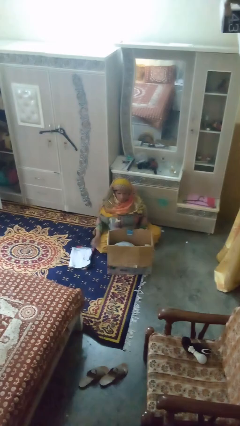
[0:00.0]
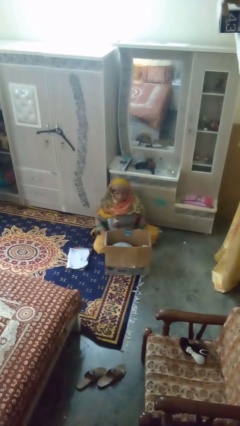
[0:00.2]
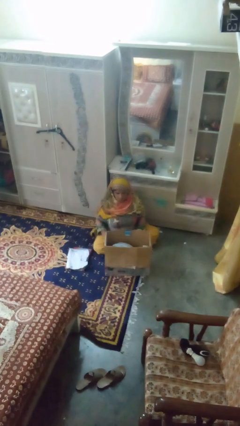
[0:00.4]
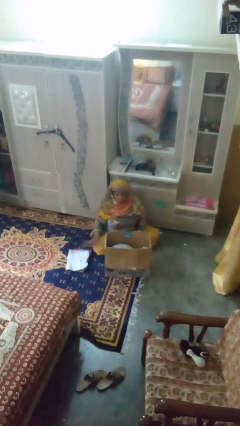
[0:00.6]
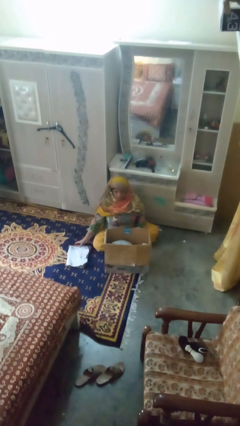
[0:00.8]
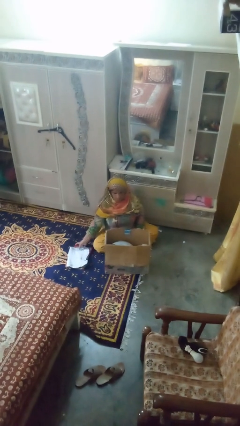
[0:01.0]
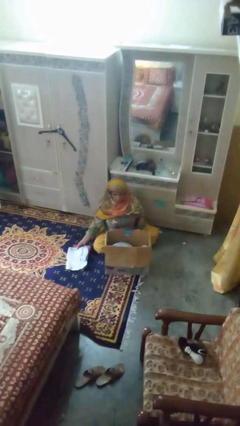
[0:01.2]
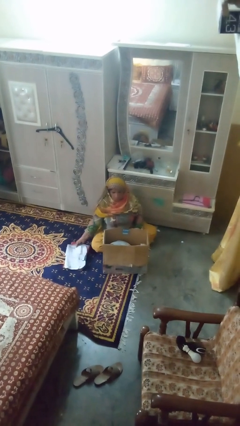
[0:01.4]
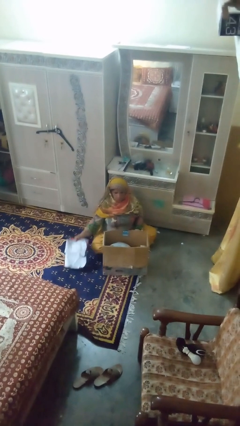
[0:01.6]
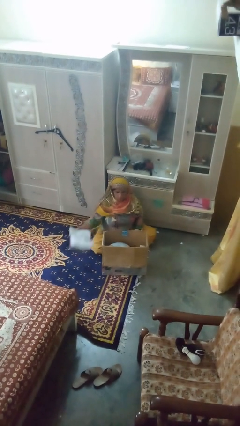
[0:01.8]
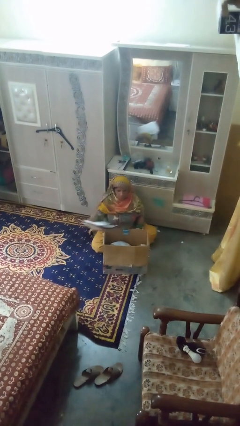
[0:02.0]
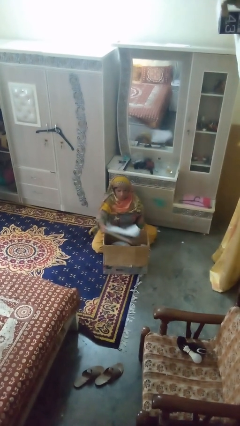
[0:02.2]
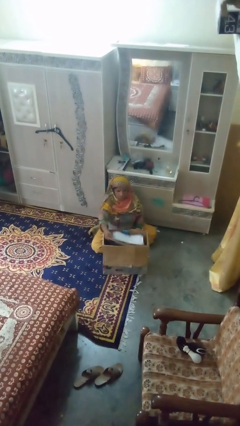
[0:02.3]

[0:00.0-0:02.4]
person puts object into box

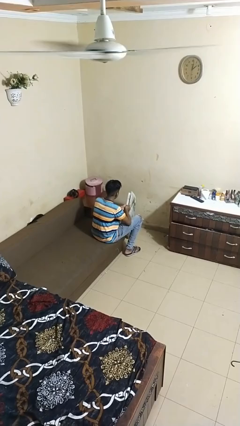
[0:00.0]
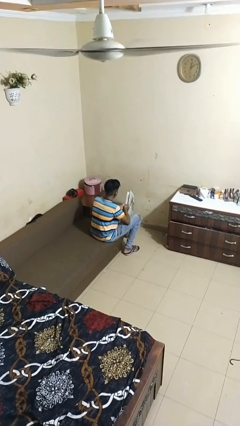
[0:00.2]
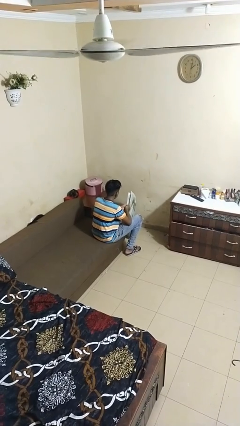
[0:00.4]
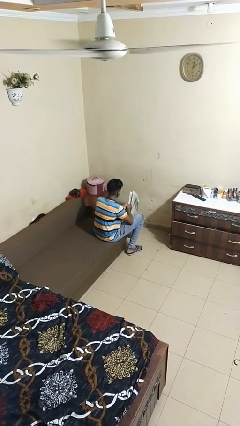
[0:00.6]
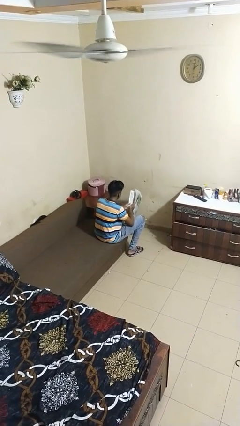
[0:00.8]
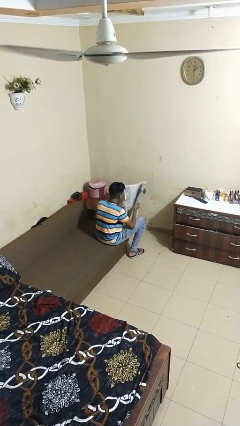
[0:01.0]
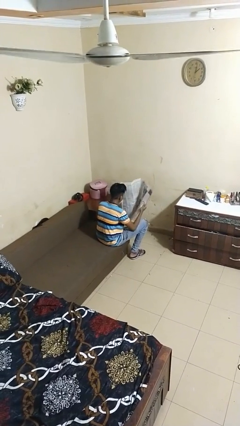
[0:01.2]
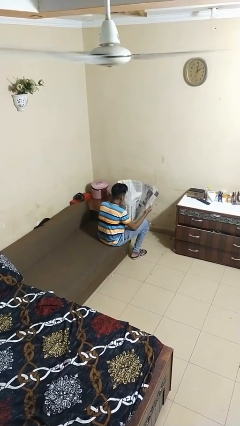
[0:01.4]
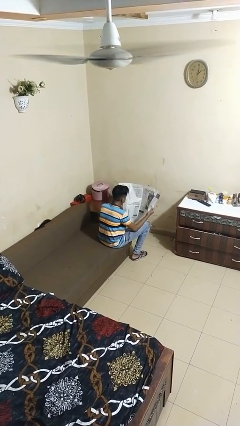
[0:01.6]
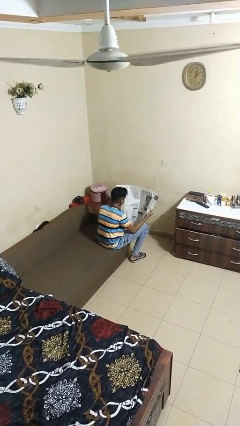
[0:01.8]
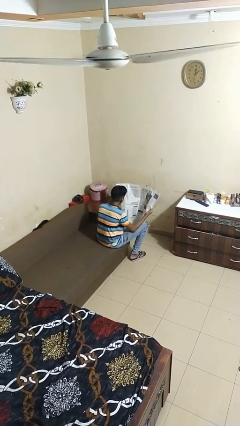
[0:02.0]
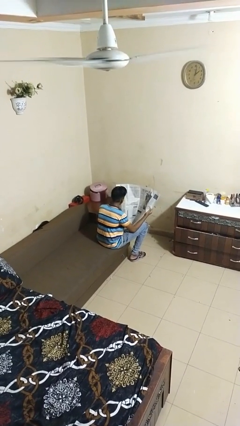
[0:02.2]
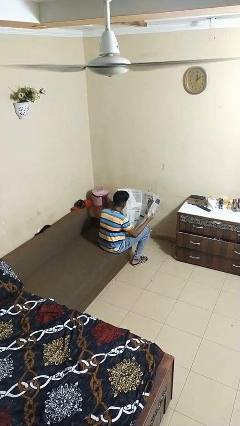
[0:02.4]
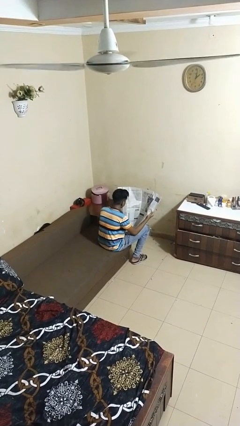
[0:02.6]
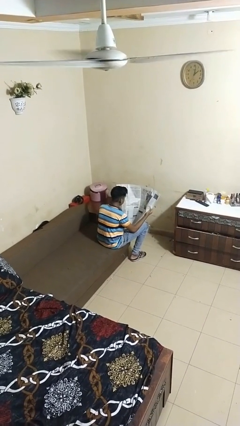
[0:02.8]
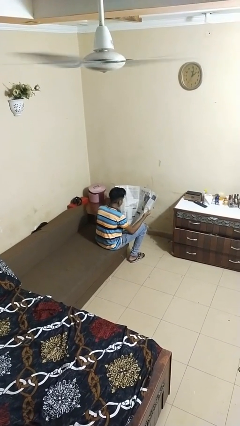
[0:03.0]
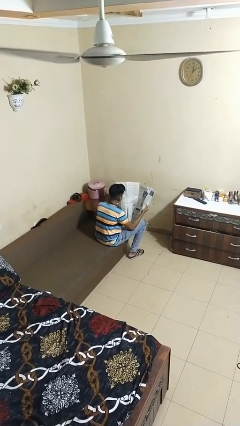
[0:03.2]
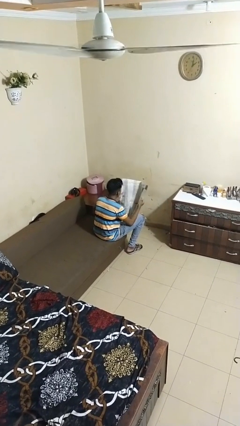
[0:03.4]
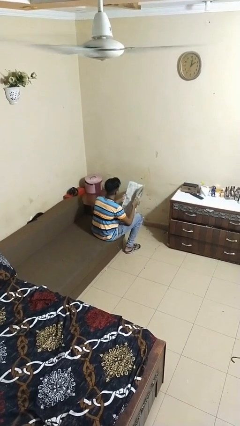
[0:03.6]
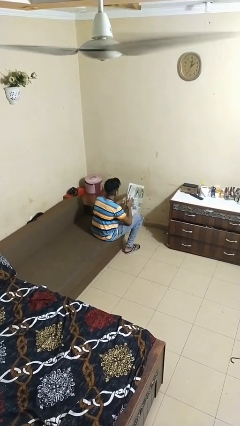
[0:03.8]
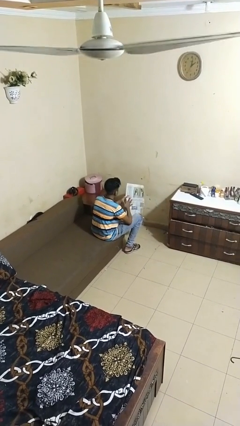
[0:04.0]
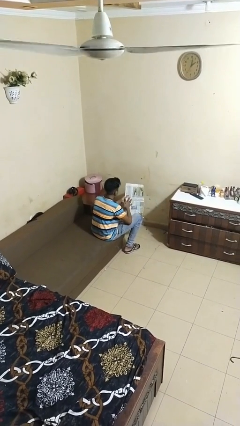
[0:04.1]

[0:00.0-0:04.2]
person reads newspaper

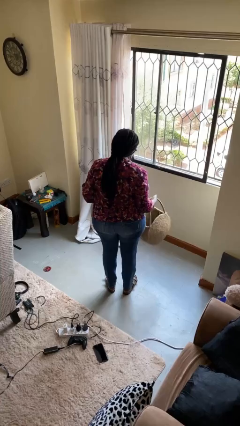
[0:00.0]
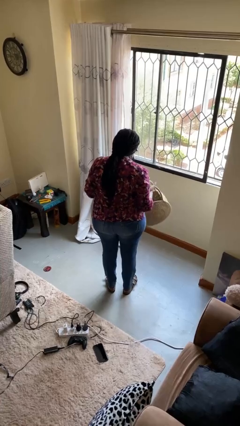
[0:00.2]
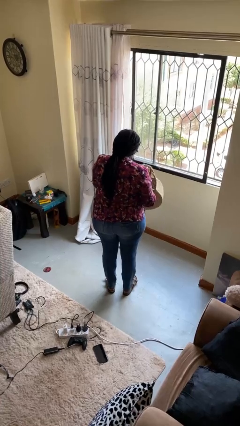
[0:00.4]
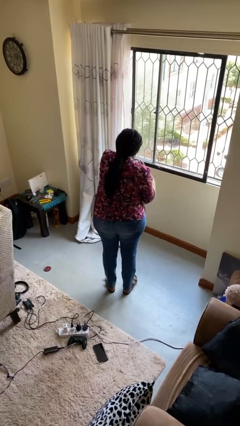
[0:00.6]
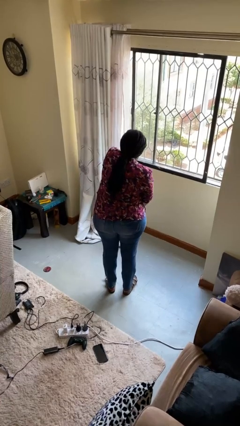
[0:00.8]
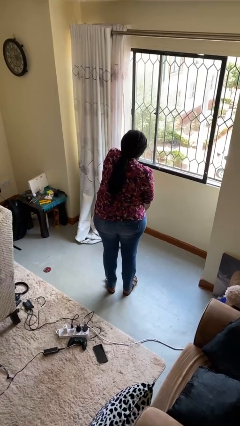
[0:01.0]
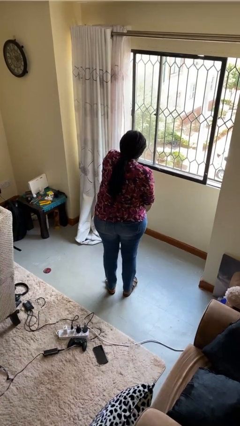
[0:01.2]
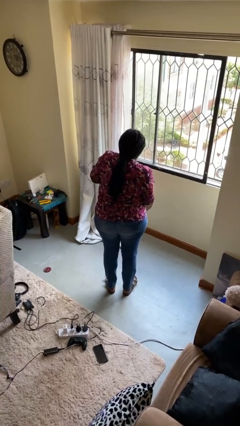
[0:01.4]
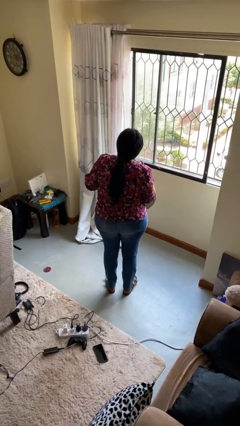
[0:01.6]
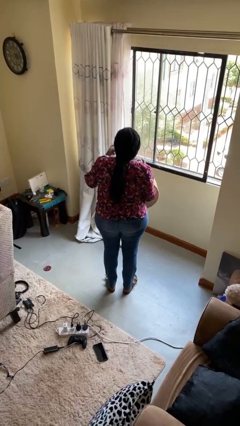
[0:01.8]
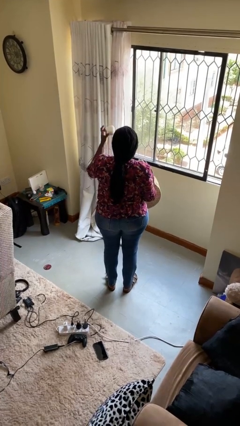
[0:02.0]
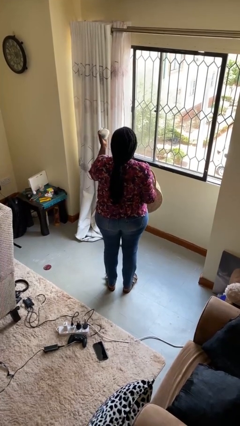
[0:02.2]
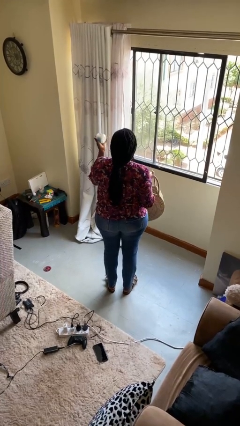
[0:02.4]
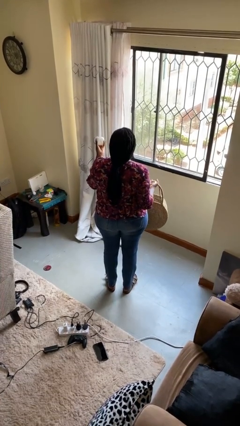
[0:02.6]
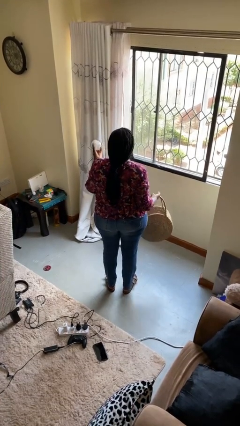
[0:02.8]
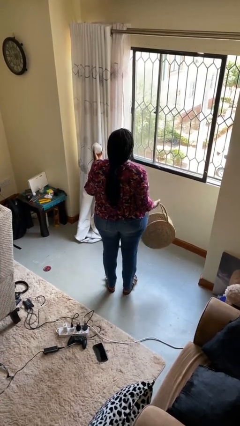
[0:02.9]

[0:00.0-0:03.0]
person takes object from basket

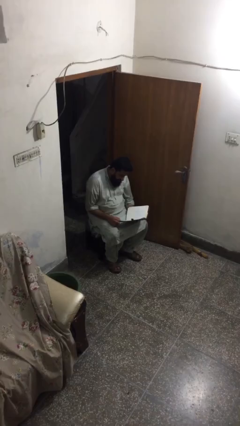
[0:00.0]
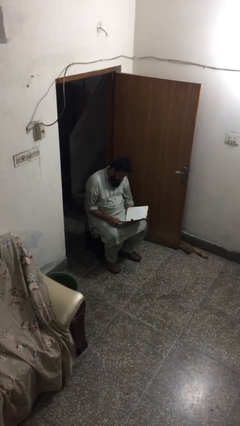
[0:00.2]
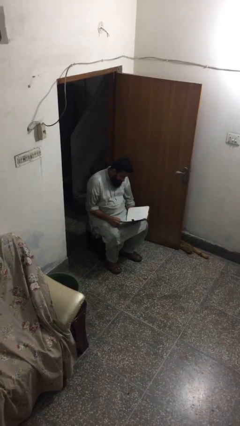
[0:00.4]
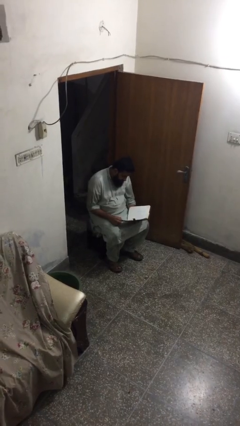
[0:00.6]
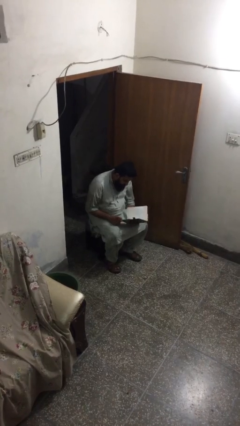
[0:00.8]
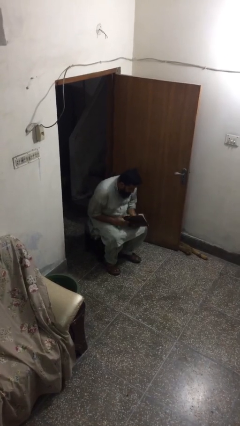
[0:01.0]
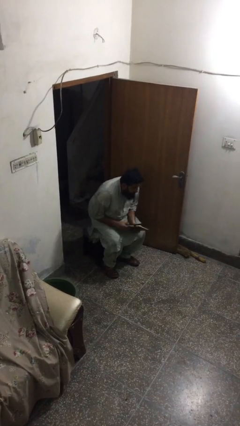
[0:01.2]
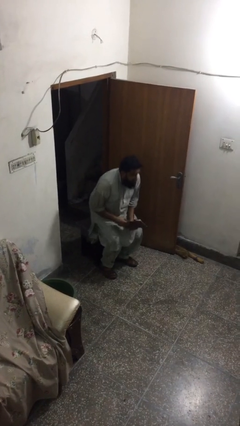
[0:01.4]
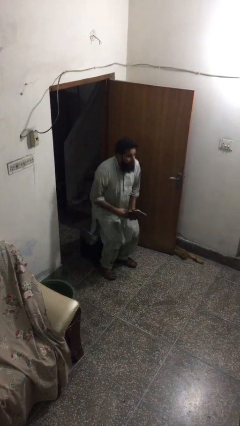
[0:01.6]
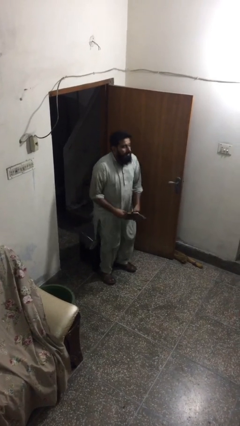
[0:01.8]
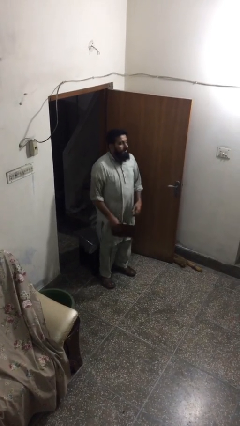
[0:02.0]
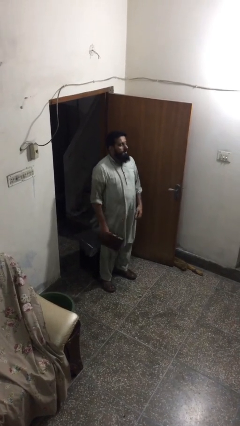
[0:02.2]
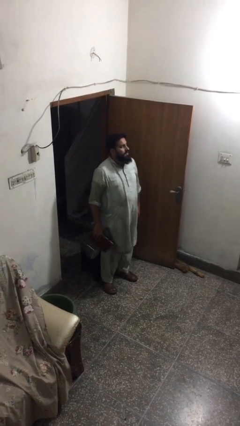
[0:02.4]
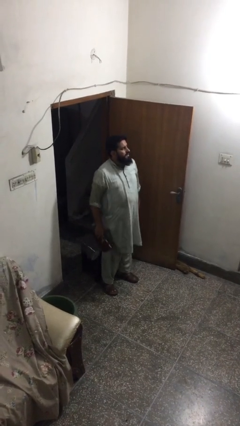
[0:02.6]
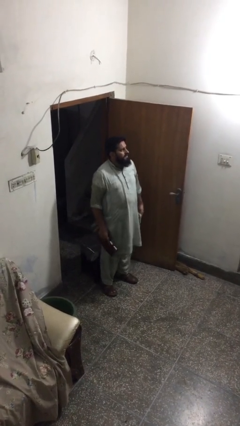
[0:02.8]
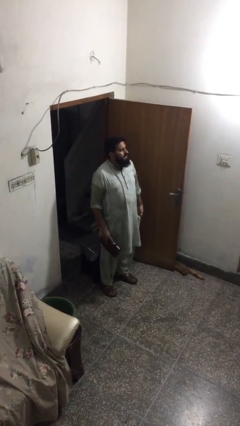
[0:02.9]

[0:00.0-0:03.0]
person stands up

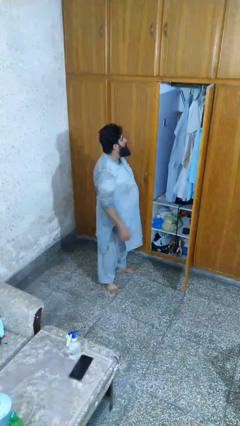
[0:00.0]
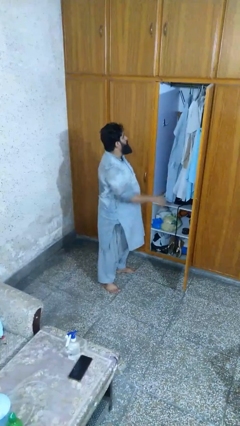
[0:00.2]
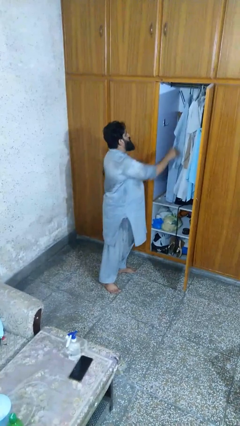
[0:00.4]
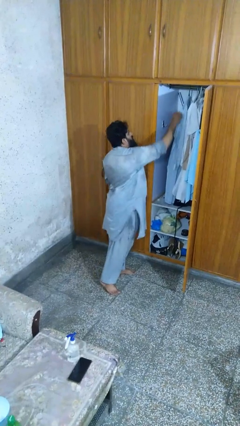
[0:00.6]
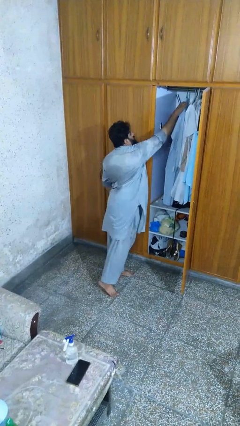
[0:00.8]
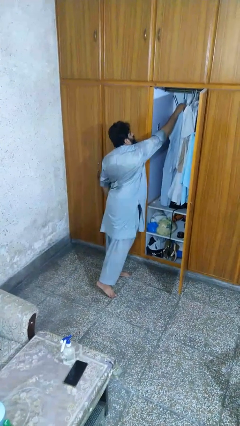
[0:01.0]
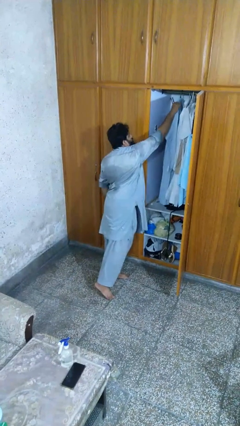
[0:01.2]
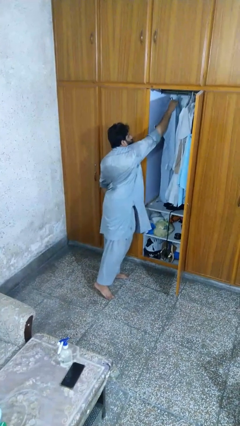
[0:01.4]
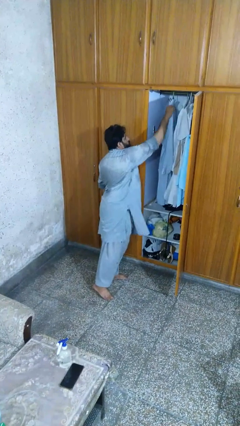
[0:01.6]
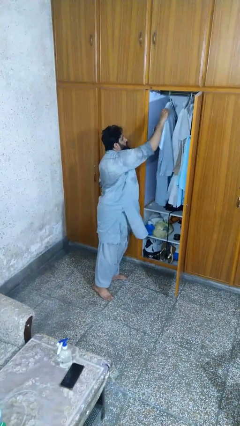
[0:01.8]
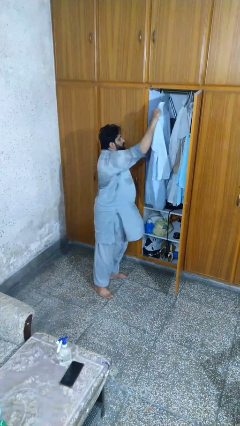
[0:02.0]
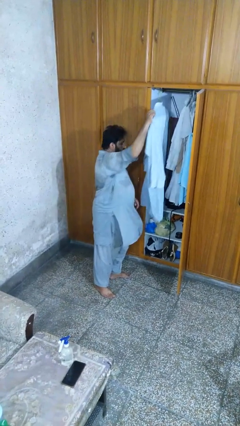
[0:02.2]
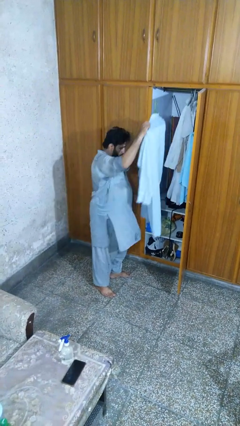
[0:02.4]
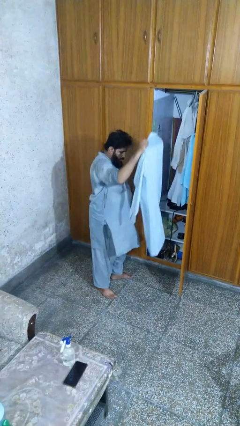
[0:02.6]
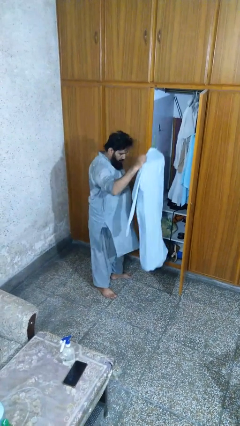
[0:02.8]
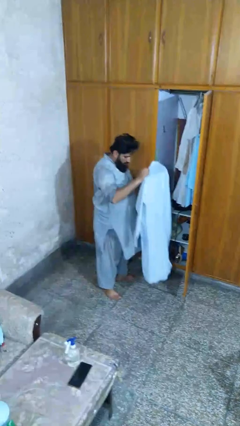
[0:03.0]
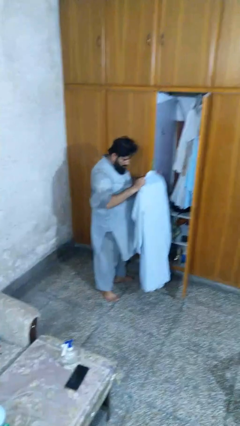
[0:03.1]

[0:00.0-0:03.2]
person takes clothes from closet

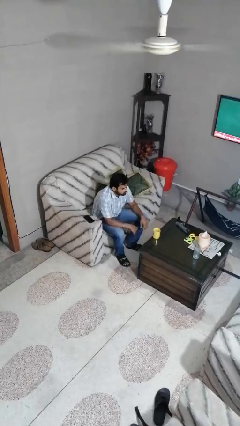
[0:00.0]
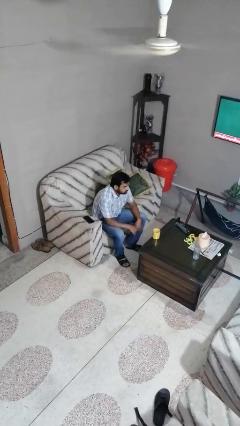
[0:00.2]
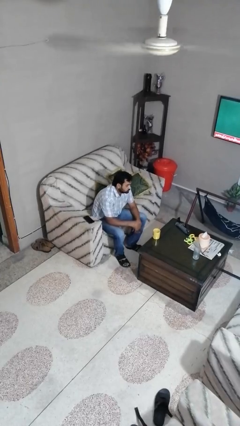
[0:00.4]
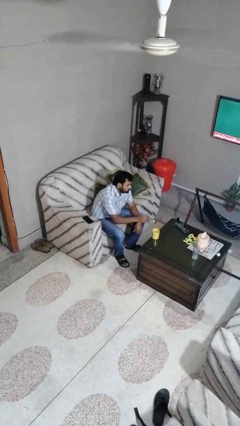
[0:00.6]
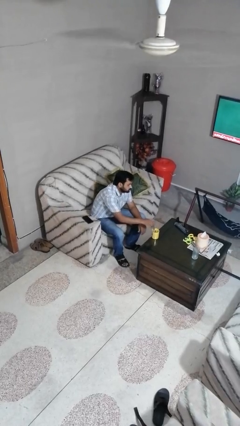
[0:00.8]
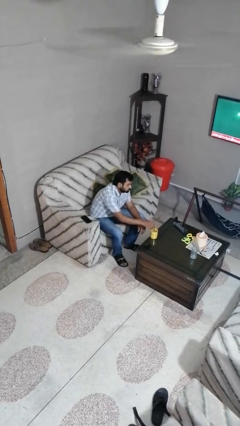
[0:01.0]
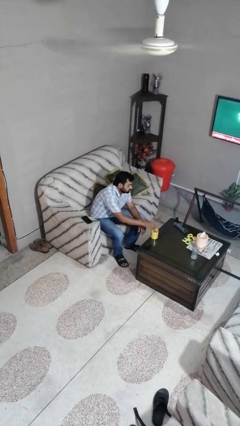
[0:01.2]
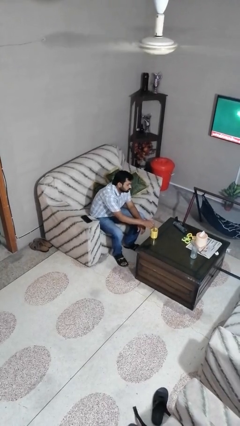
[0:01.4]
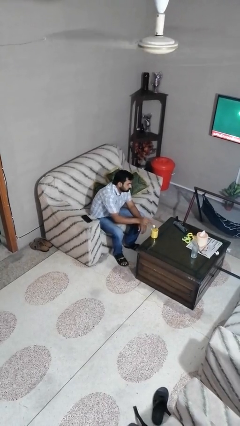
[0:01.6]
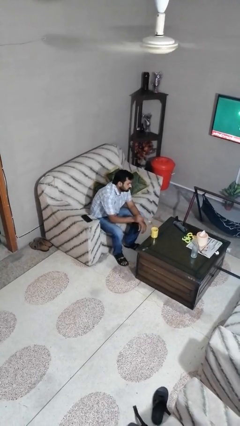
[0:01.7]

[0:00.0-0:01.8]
person stirs mug
